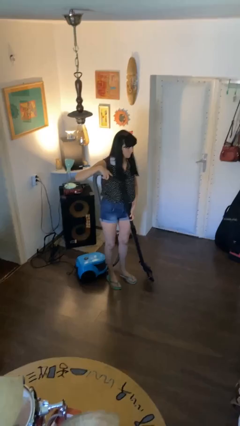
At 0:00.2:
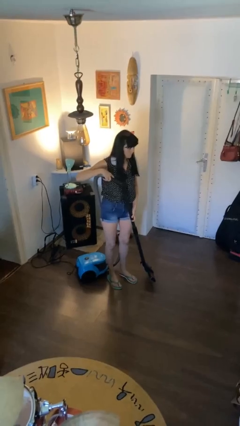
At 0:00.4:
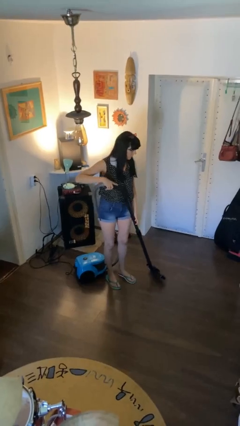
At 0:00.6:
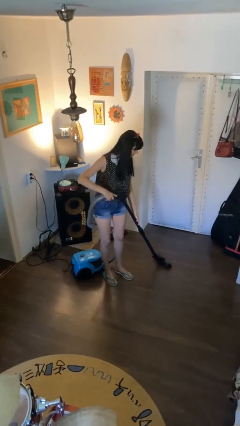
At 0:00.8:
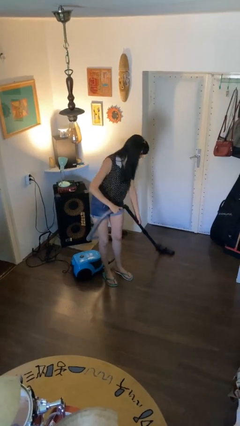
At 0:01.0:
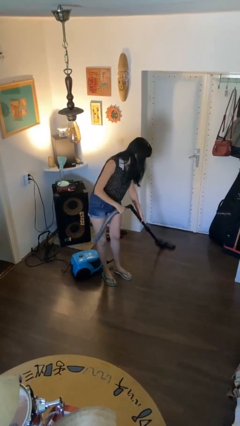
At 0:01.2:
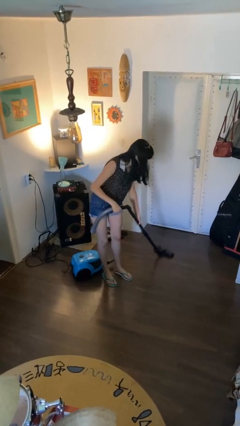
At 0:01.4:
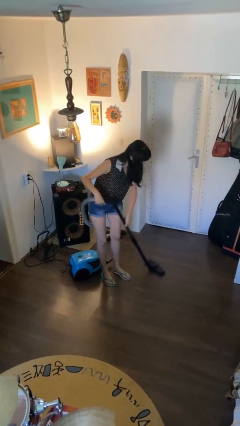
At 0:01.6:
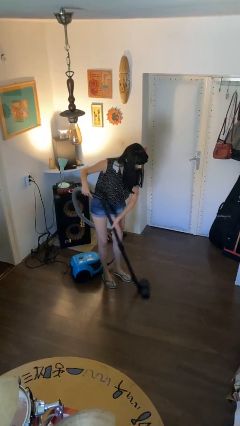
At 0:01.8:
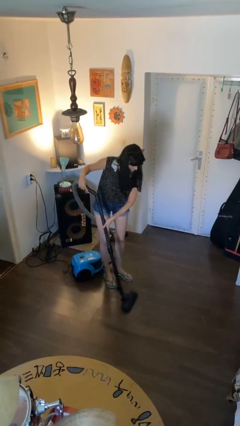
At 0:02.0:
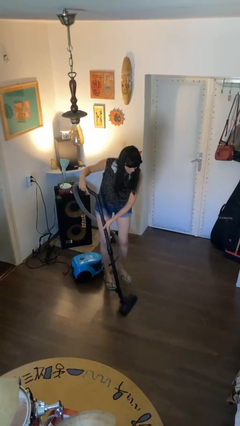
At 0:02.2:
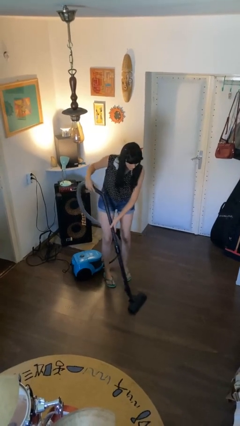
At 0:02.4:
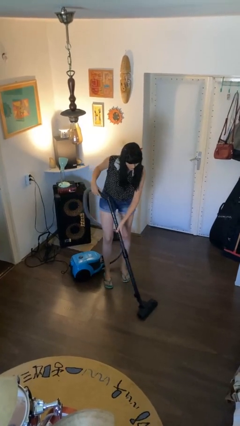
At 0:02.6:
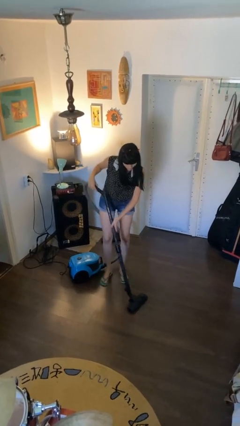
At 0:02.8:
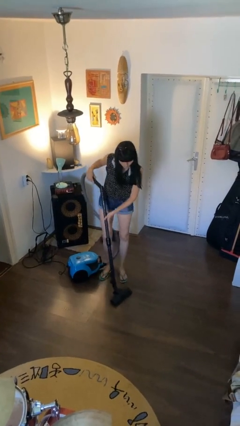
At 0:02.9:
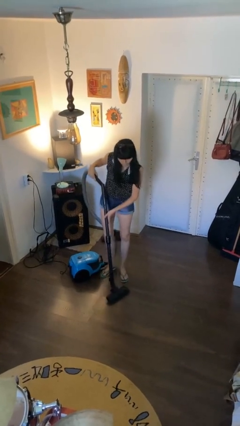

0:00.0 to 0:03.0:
person vacuums carpet

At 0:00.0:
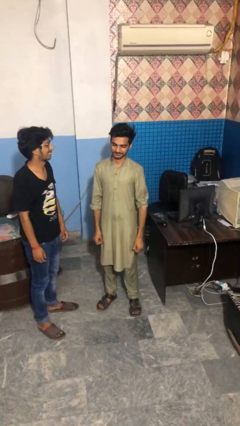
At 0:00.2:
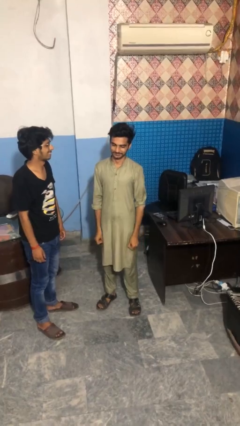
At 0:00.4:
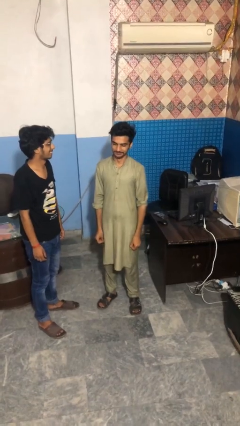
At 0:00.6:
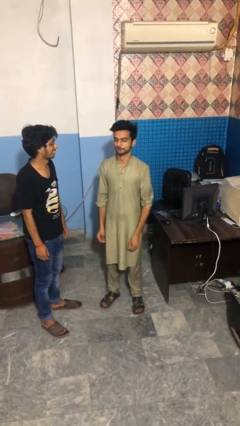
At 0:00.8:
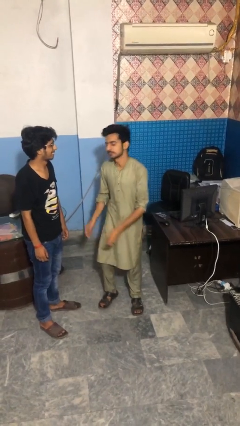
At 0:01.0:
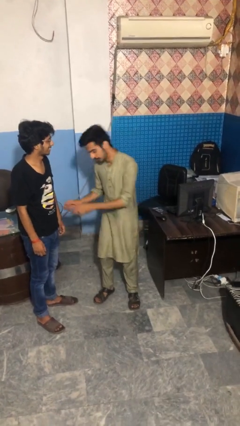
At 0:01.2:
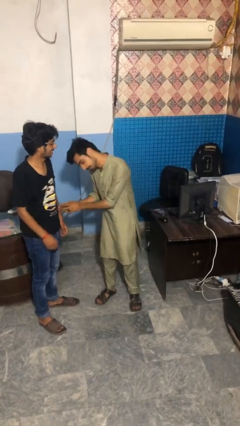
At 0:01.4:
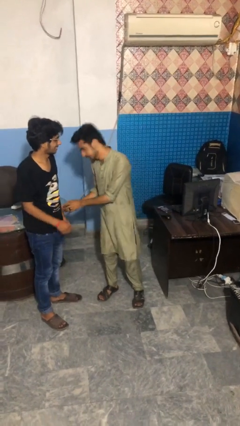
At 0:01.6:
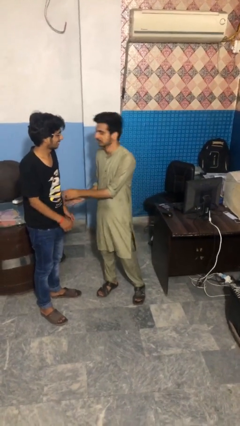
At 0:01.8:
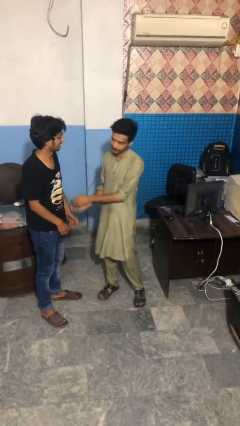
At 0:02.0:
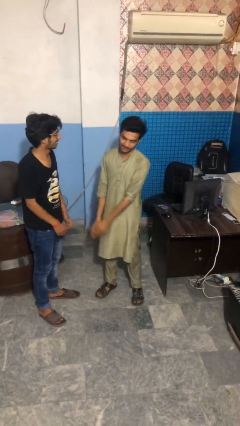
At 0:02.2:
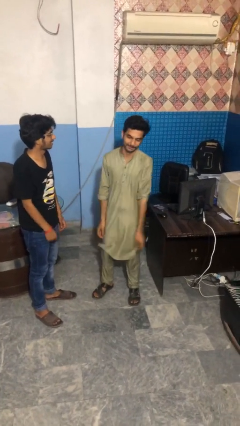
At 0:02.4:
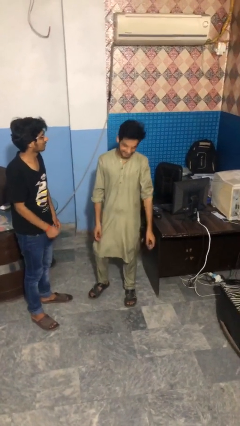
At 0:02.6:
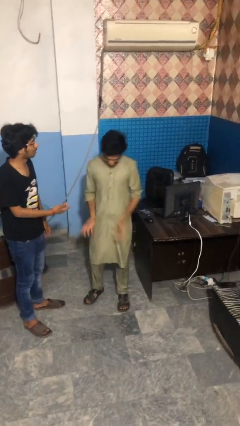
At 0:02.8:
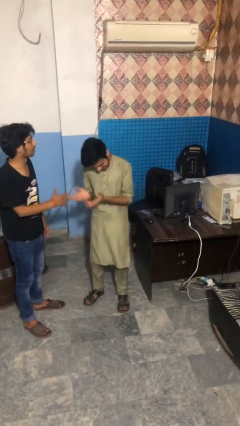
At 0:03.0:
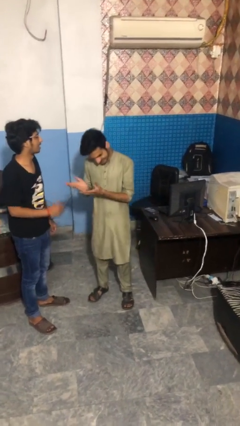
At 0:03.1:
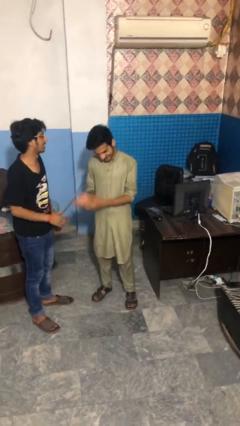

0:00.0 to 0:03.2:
person laughs with person

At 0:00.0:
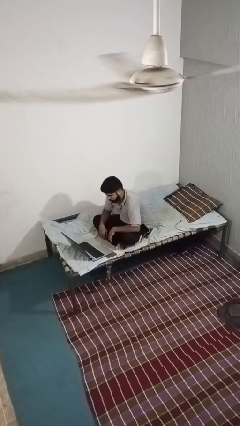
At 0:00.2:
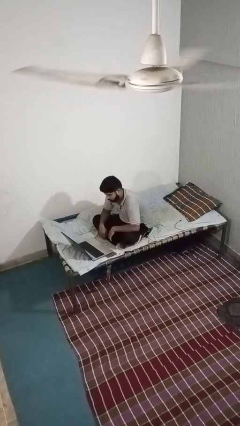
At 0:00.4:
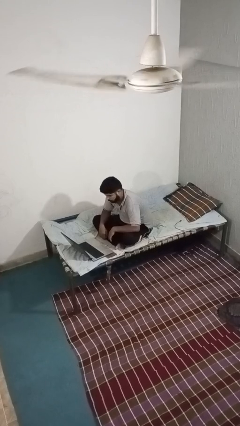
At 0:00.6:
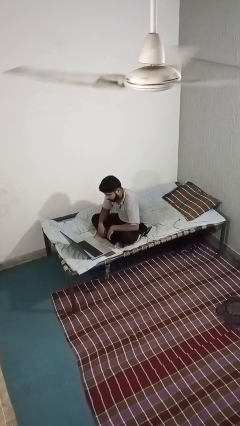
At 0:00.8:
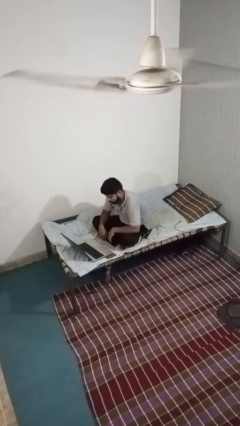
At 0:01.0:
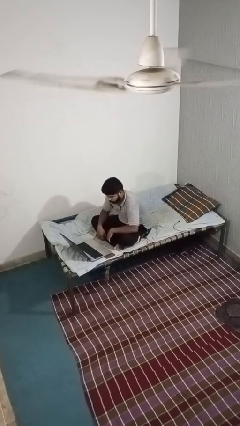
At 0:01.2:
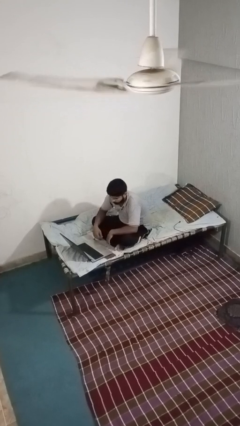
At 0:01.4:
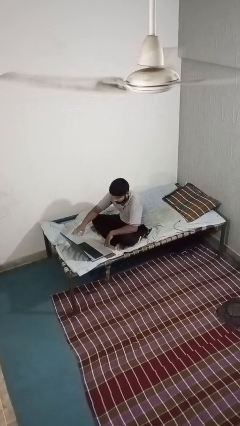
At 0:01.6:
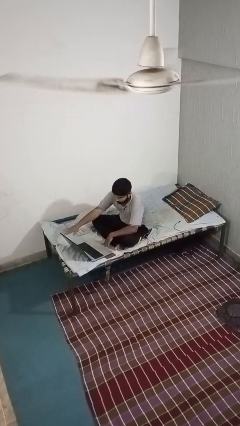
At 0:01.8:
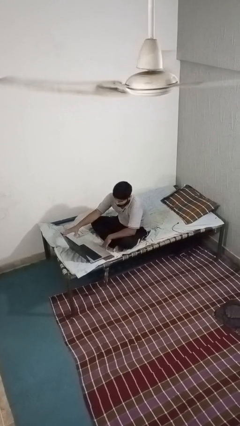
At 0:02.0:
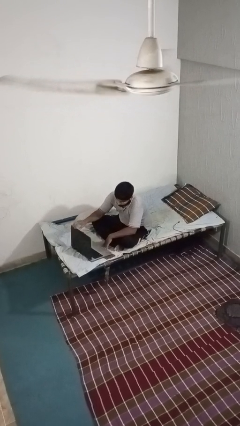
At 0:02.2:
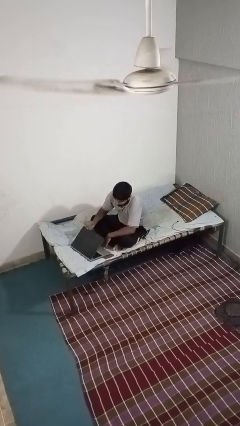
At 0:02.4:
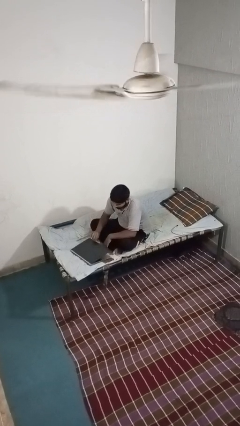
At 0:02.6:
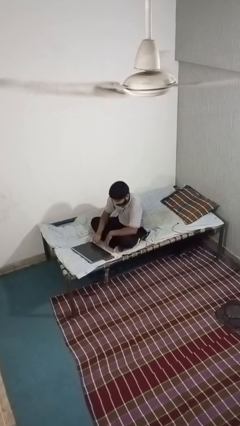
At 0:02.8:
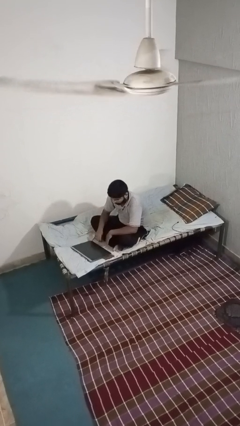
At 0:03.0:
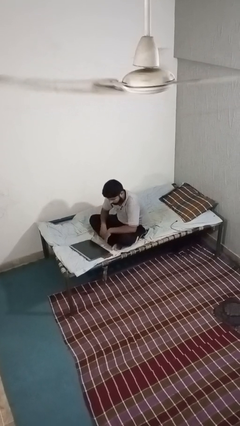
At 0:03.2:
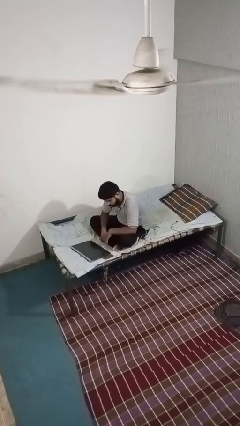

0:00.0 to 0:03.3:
person closes laptop

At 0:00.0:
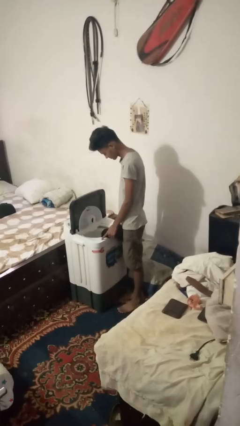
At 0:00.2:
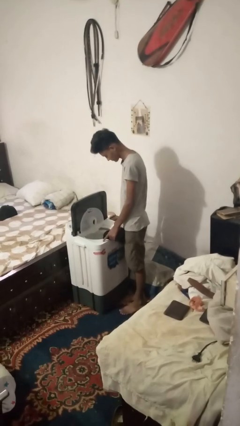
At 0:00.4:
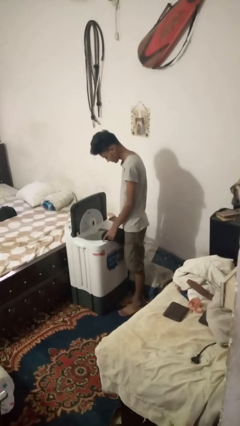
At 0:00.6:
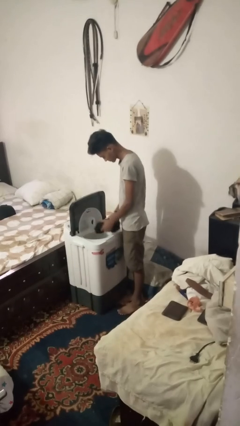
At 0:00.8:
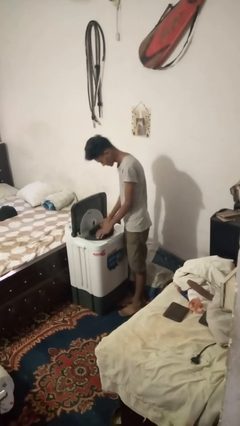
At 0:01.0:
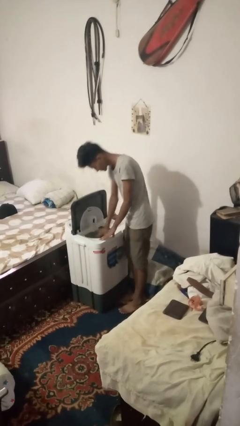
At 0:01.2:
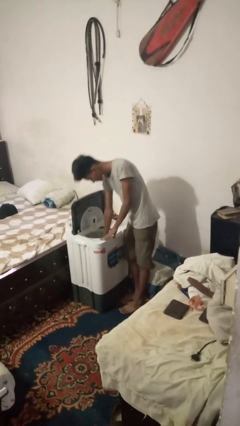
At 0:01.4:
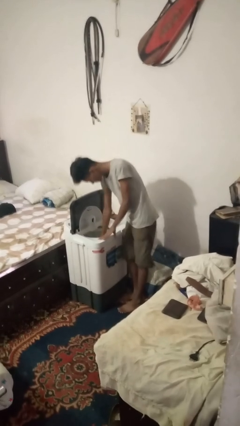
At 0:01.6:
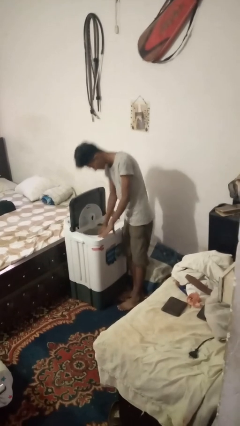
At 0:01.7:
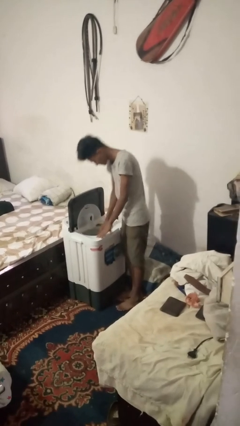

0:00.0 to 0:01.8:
person loads clotheswasher

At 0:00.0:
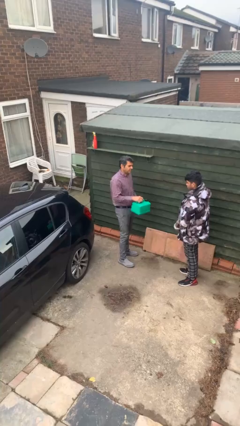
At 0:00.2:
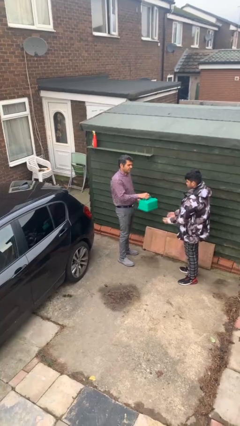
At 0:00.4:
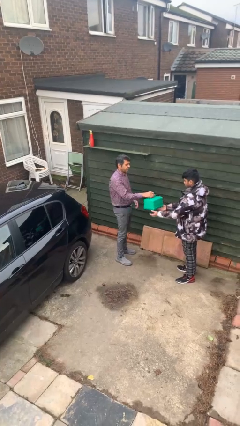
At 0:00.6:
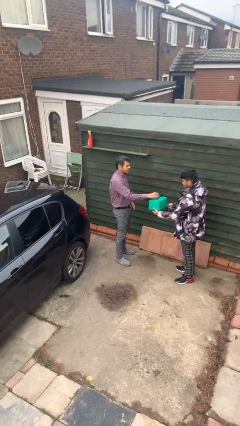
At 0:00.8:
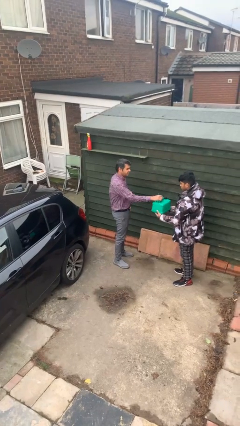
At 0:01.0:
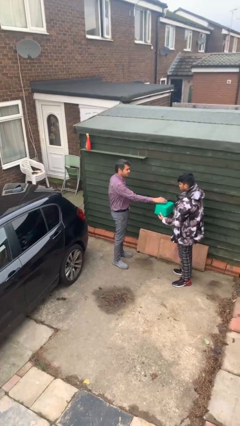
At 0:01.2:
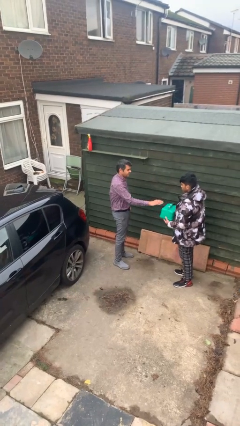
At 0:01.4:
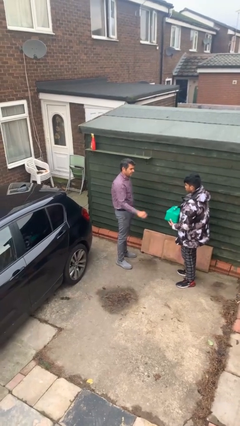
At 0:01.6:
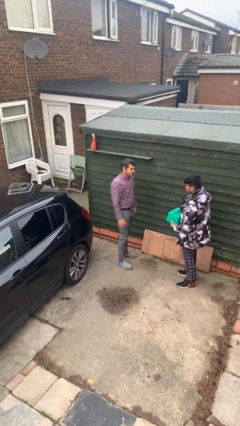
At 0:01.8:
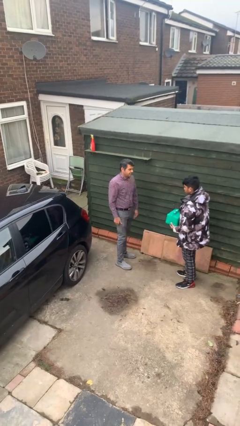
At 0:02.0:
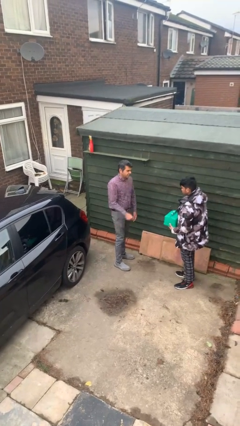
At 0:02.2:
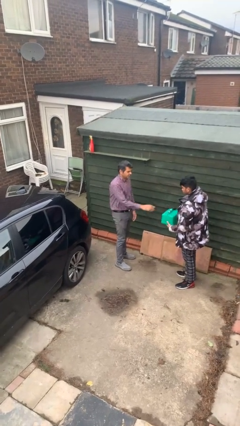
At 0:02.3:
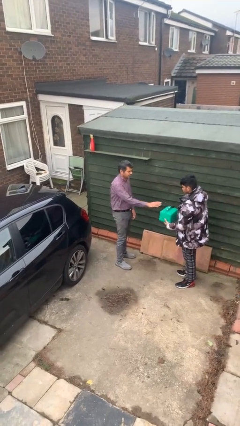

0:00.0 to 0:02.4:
person transfers object to person

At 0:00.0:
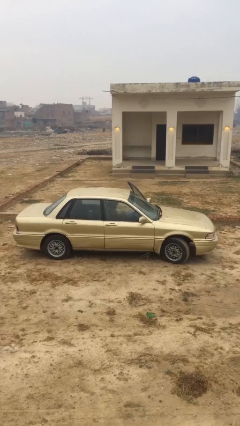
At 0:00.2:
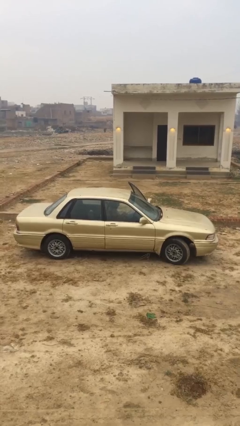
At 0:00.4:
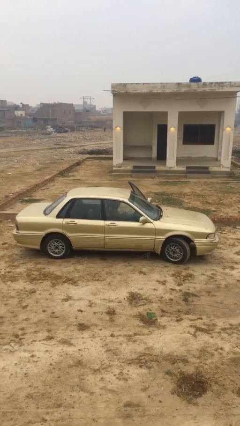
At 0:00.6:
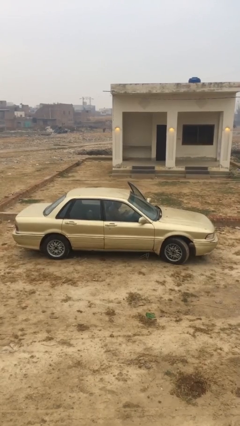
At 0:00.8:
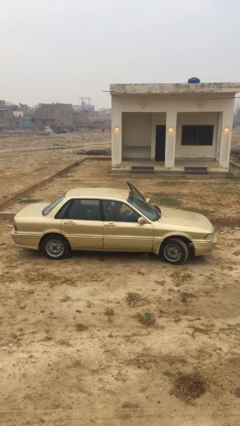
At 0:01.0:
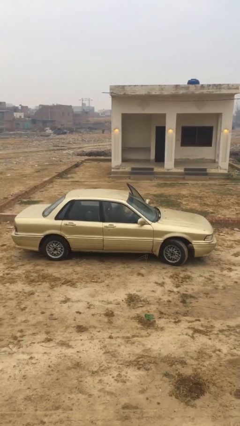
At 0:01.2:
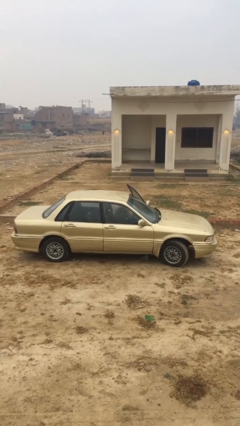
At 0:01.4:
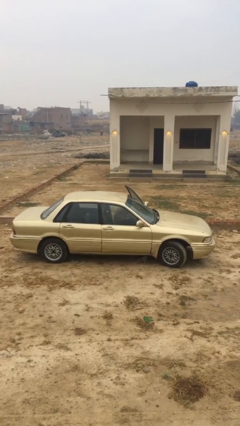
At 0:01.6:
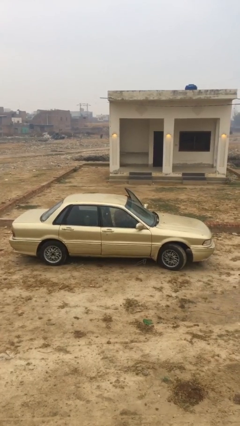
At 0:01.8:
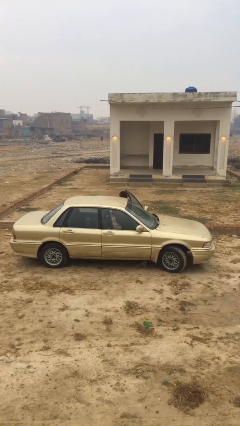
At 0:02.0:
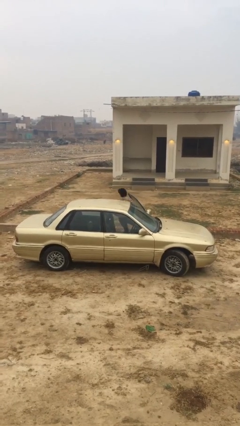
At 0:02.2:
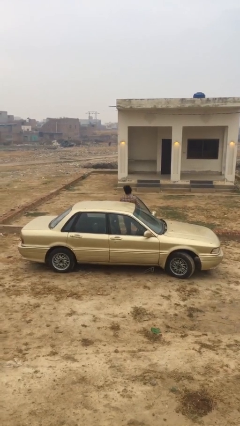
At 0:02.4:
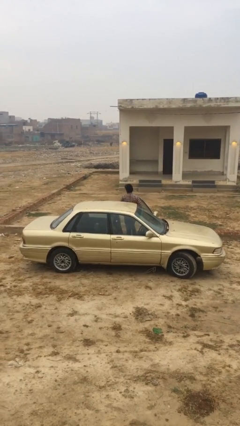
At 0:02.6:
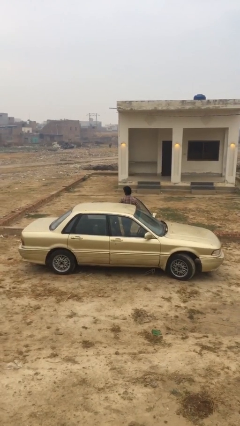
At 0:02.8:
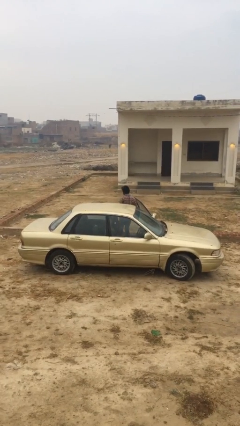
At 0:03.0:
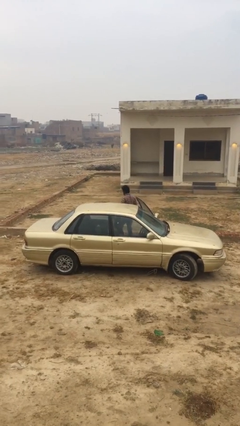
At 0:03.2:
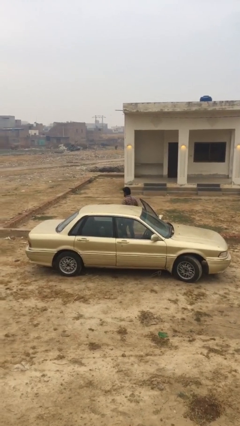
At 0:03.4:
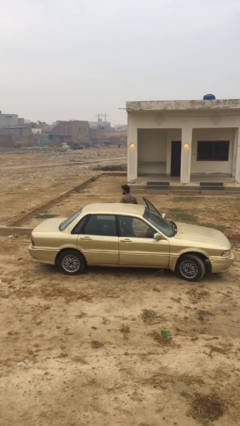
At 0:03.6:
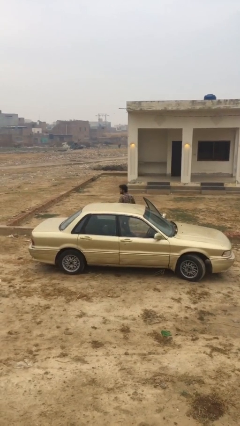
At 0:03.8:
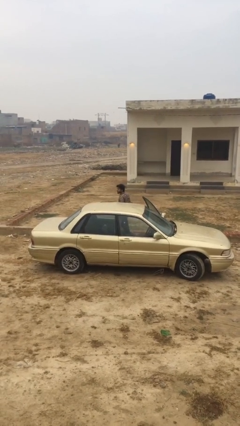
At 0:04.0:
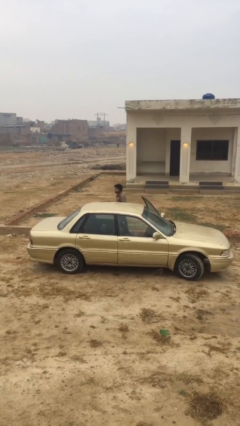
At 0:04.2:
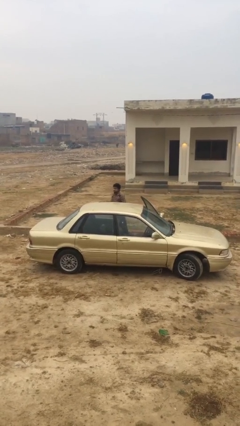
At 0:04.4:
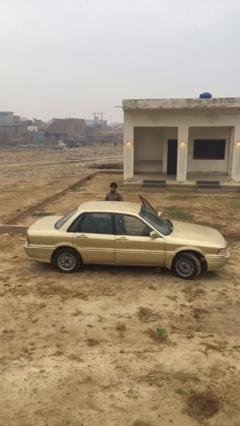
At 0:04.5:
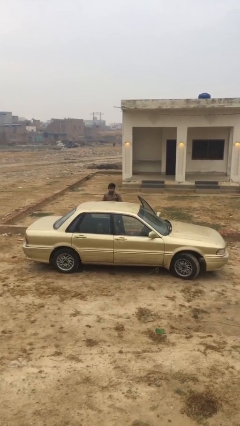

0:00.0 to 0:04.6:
person exits car
